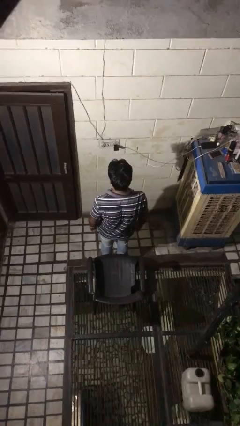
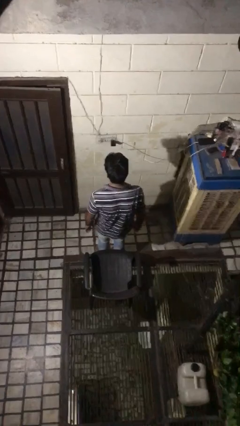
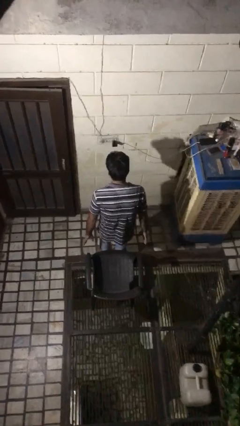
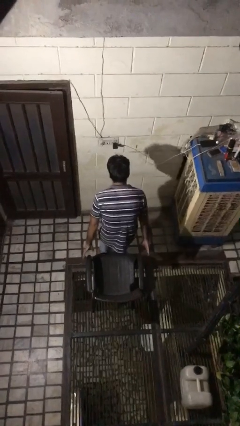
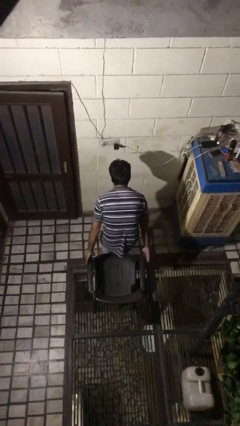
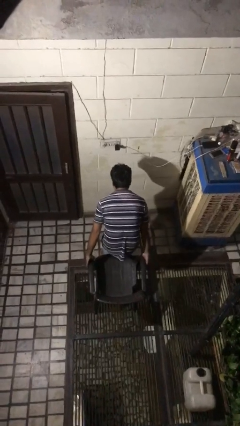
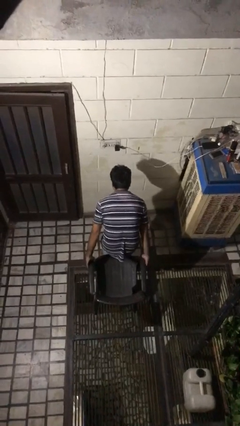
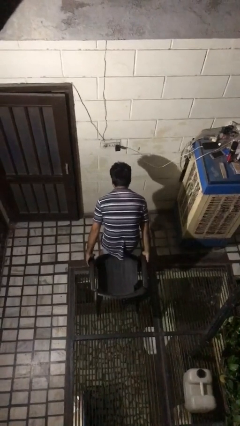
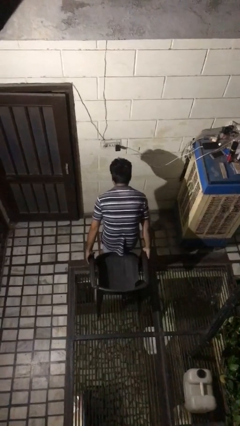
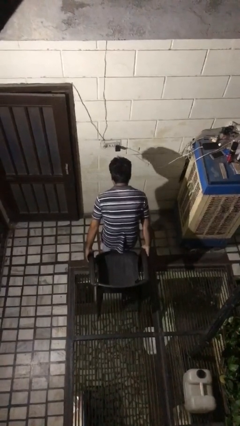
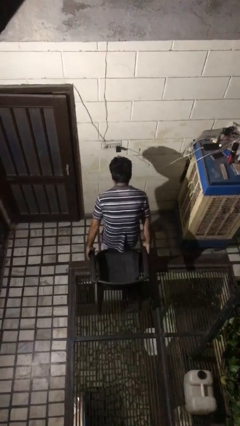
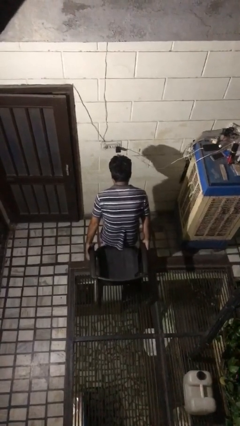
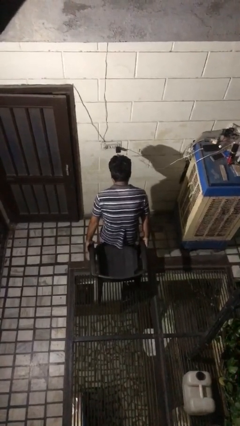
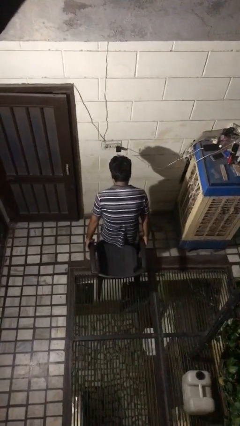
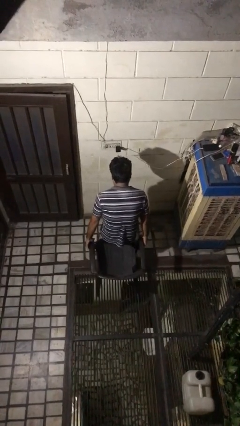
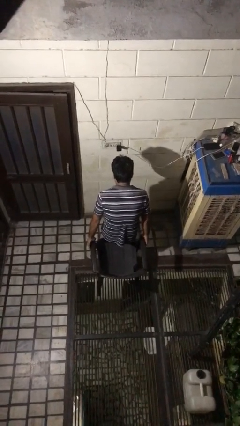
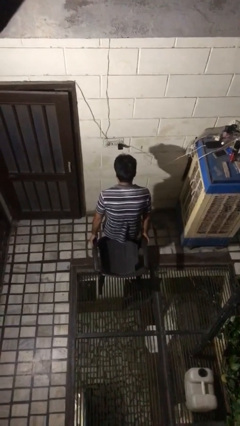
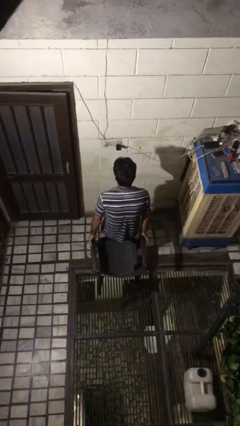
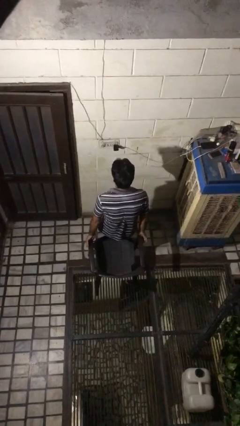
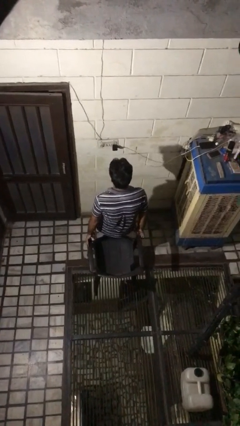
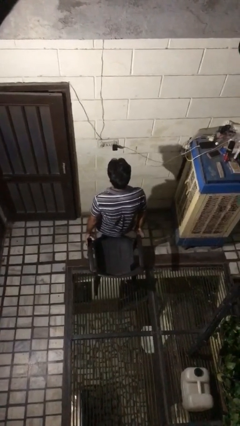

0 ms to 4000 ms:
person pulls out chair

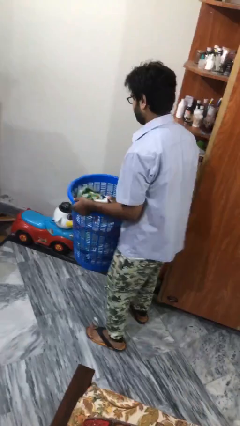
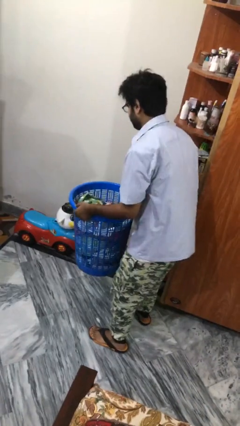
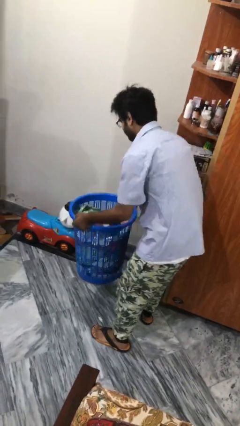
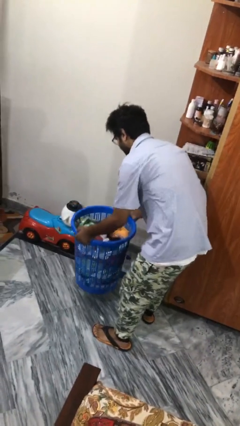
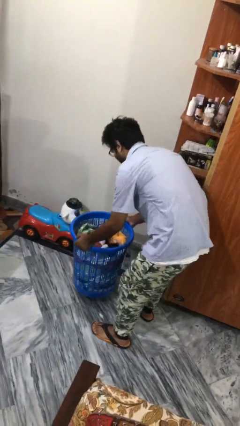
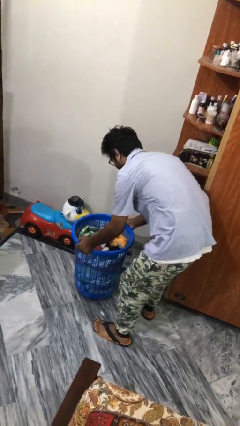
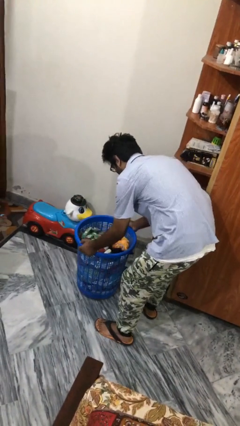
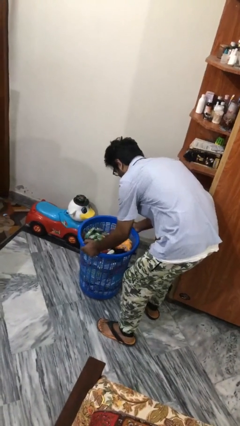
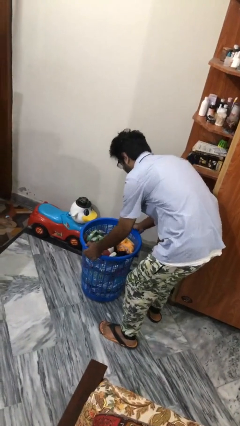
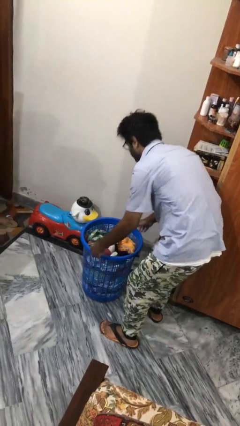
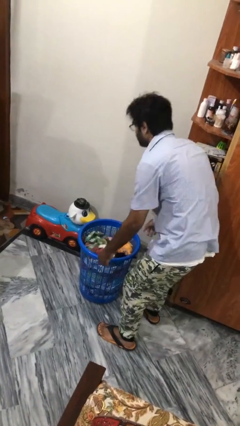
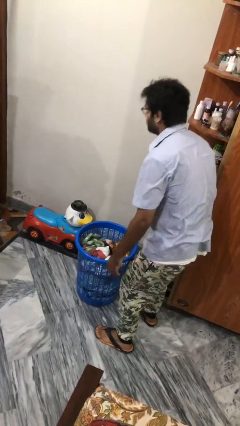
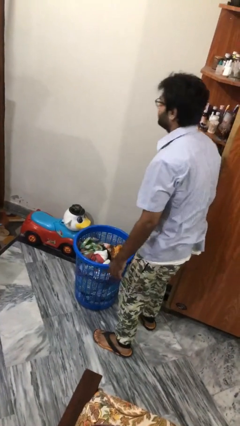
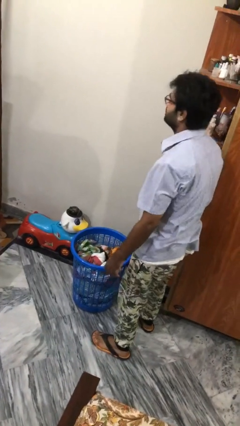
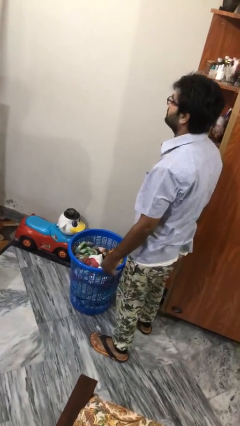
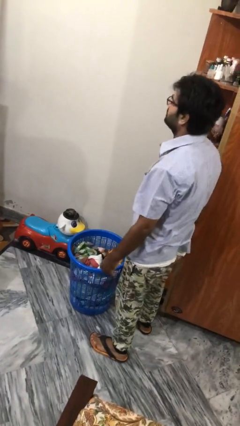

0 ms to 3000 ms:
person puts down object on floor

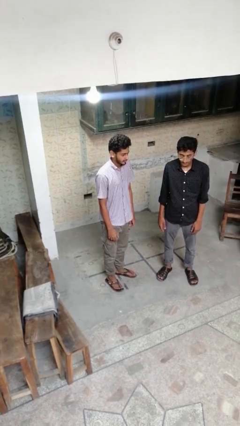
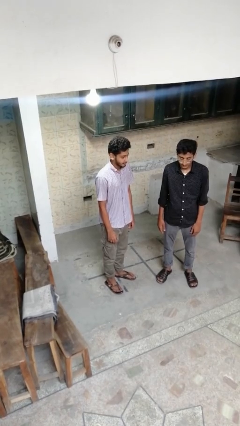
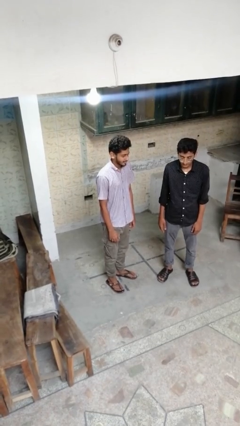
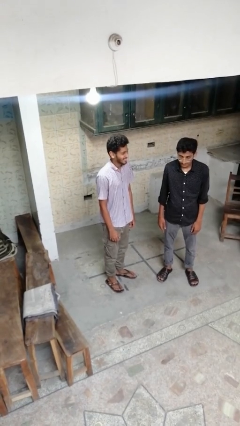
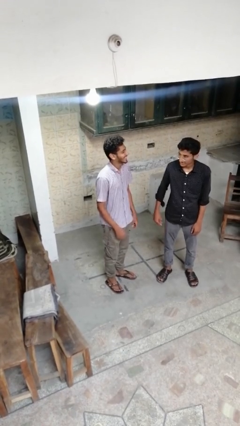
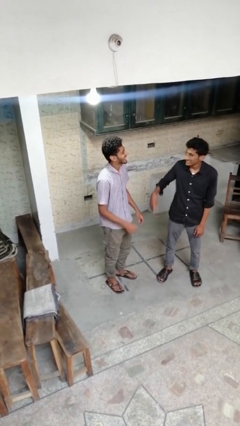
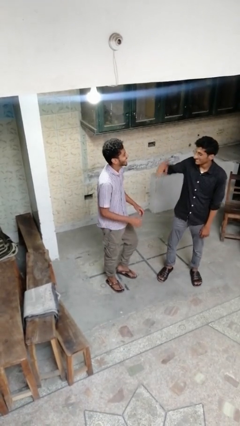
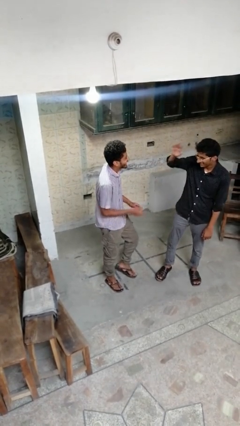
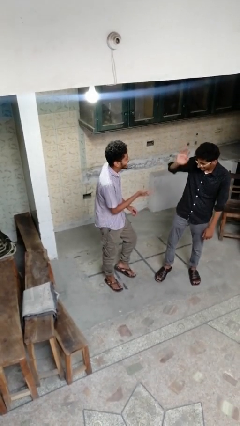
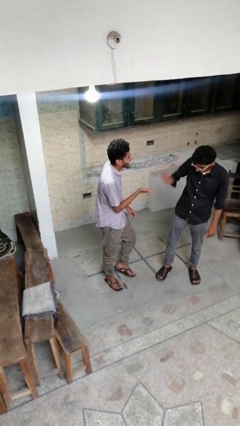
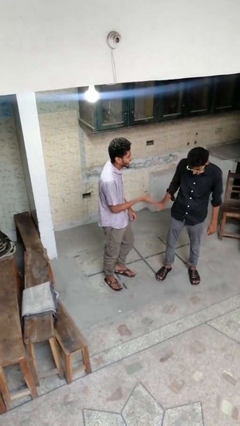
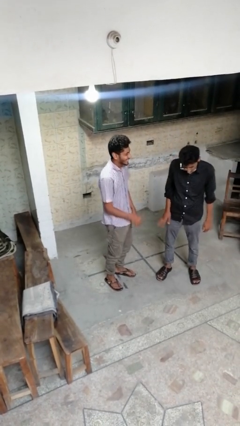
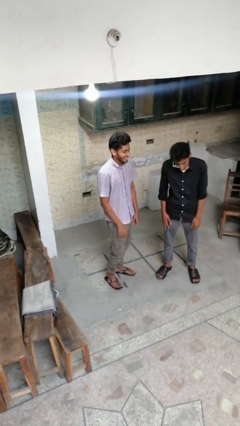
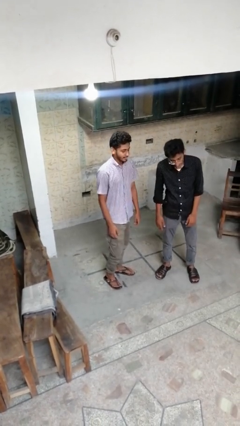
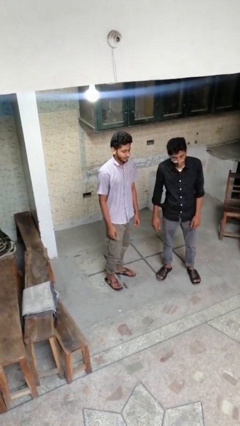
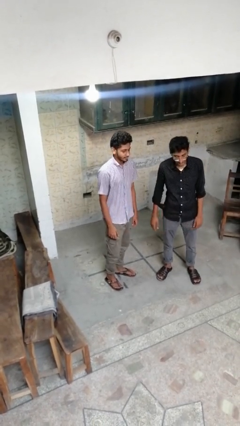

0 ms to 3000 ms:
person laughs with person

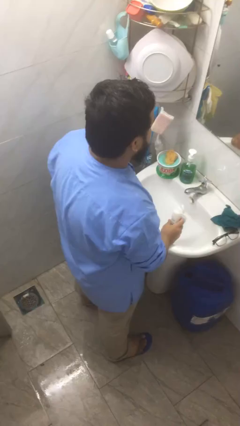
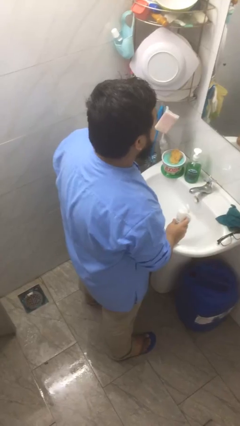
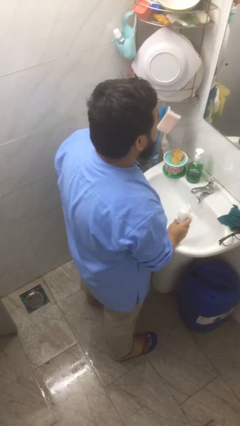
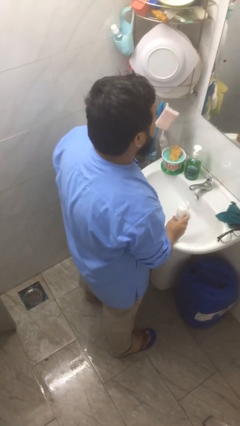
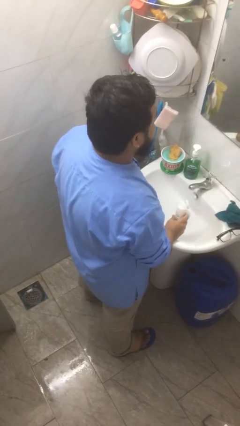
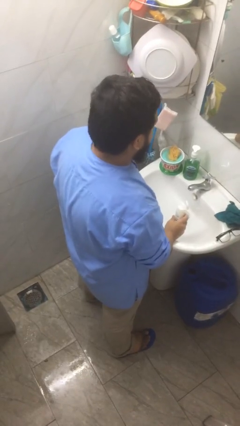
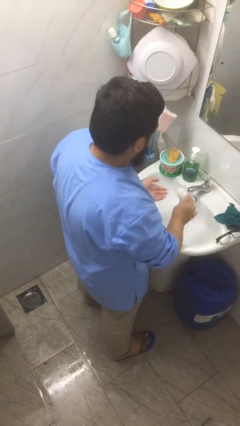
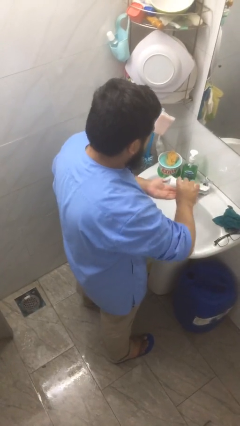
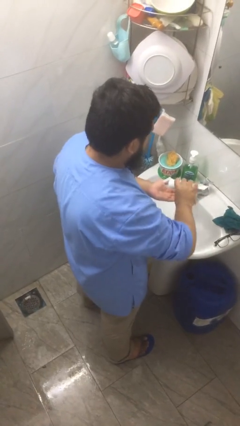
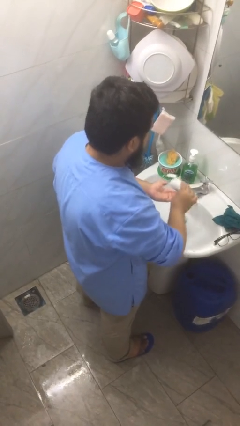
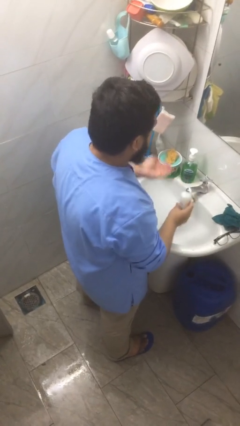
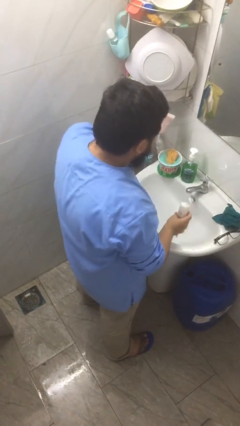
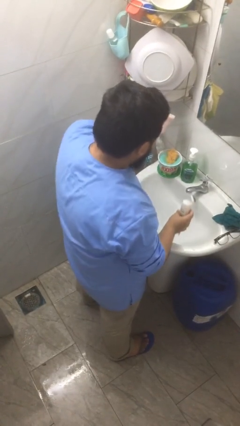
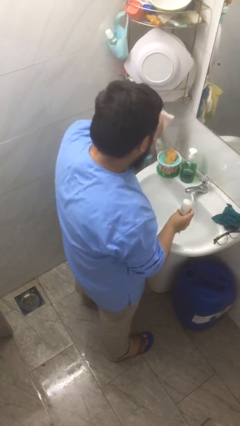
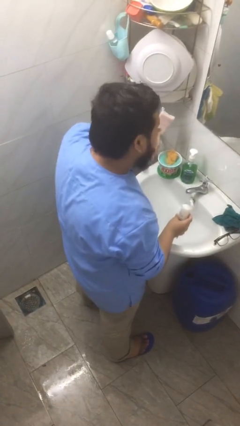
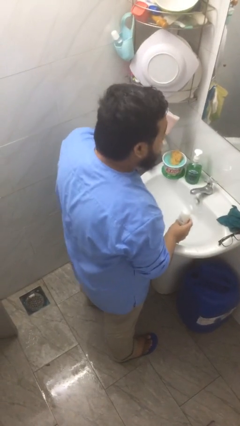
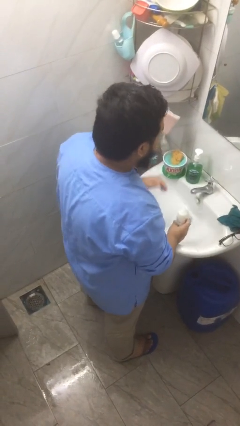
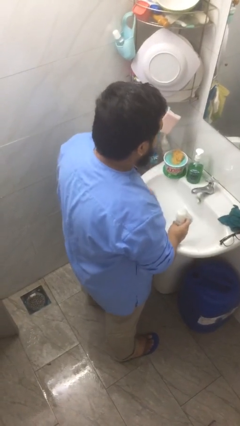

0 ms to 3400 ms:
person applies facial moisturizer

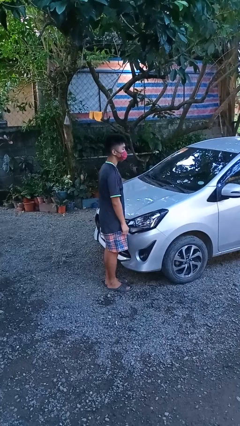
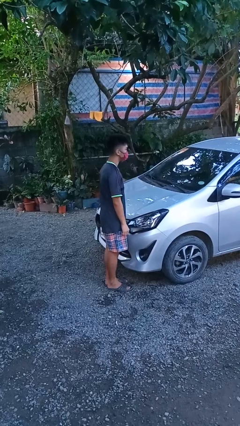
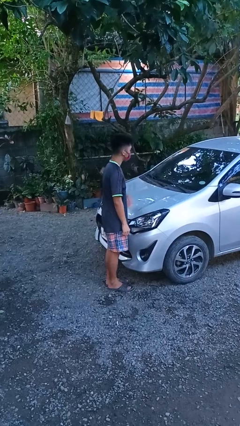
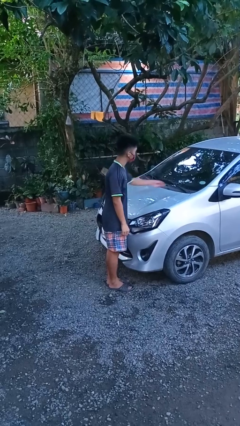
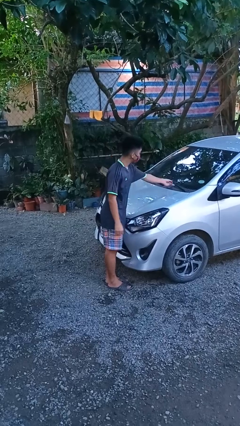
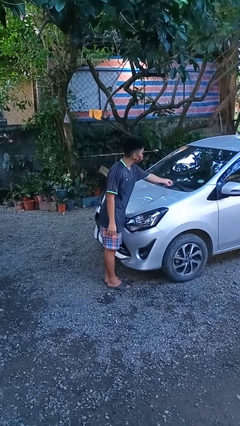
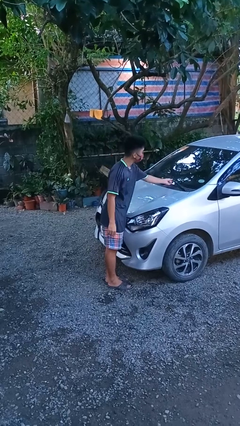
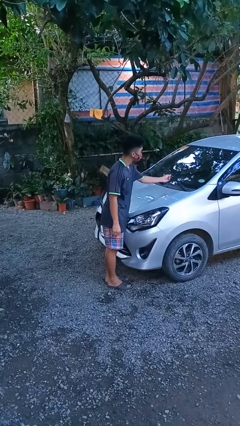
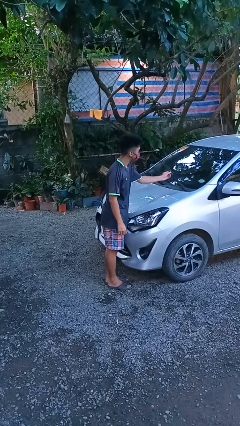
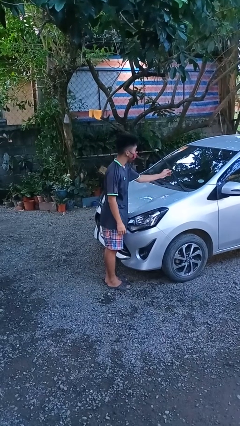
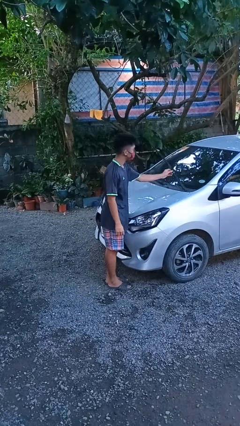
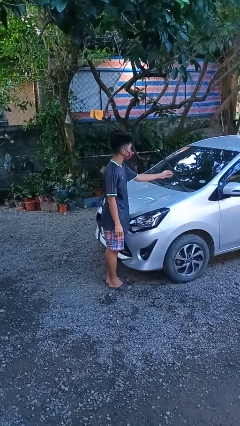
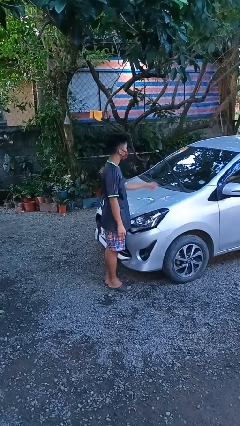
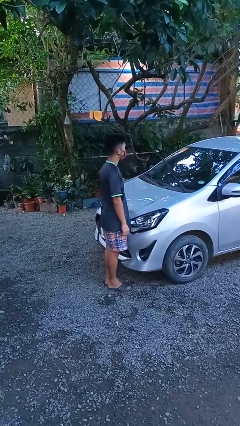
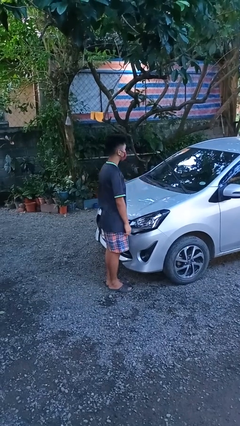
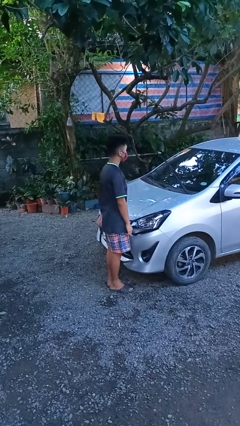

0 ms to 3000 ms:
person flips up car wipers

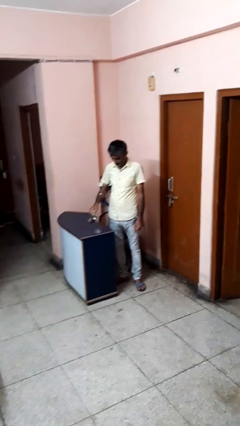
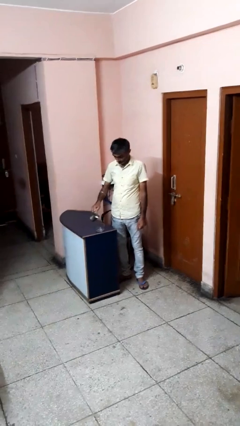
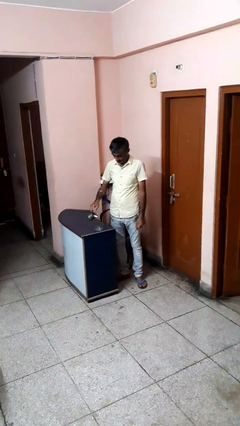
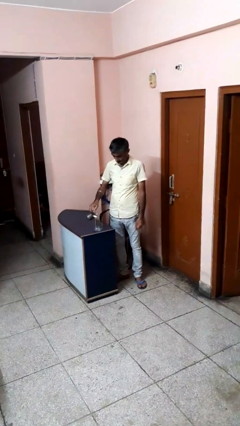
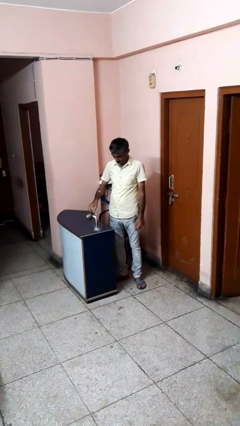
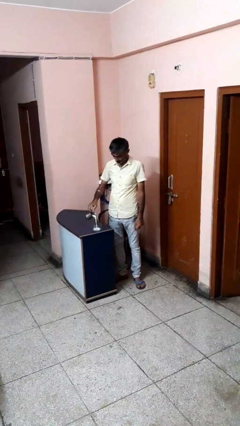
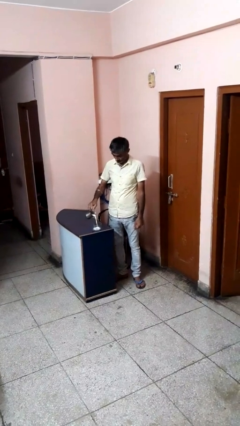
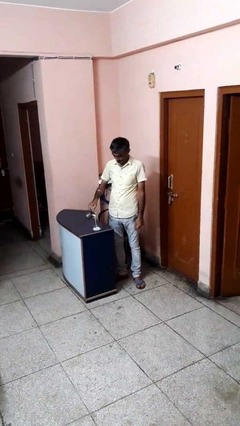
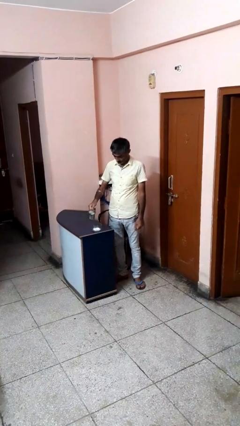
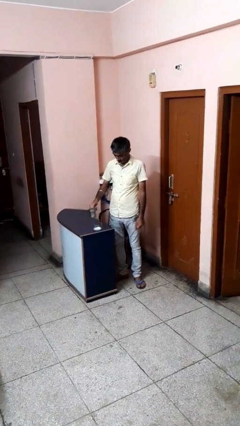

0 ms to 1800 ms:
person pours into bowl
